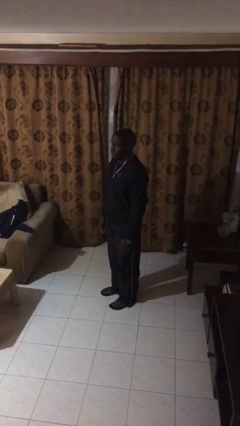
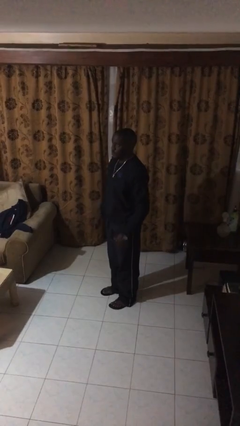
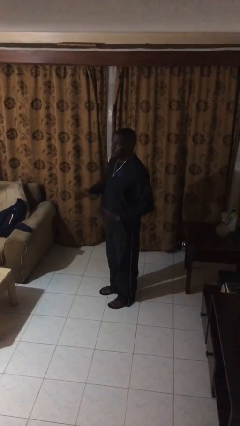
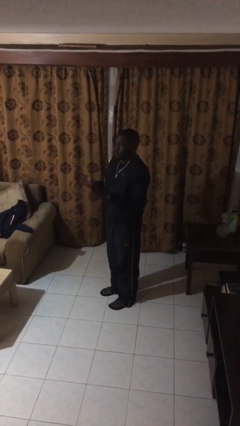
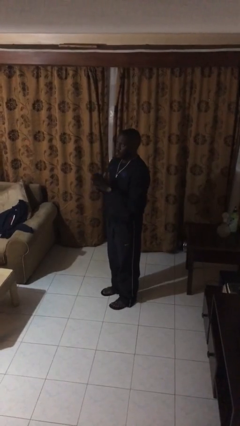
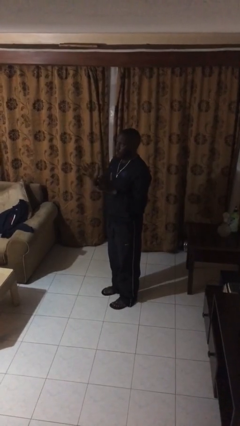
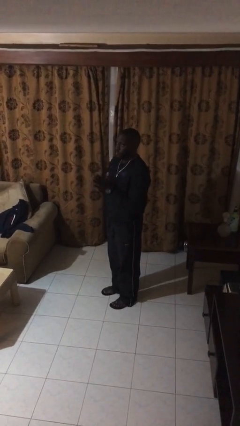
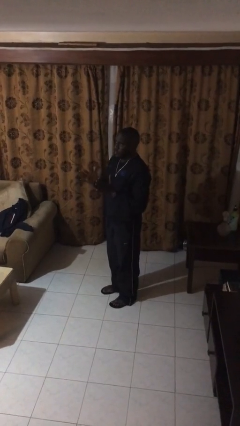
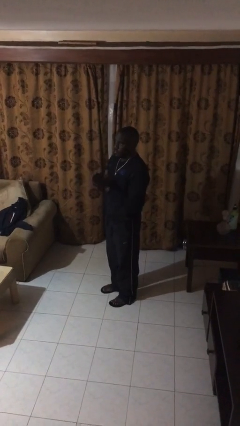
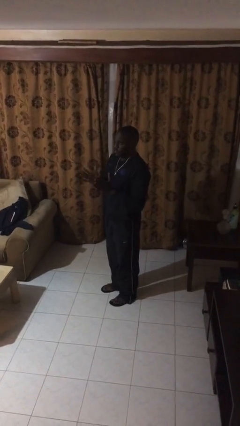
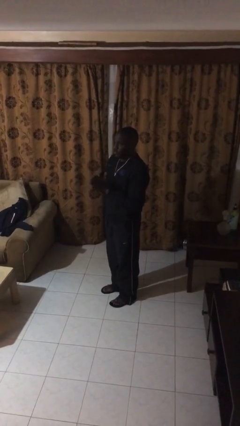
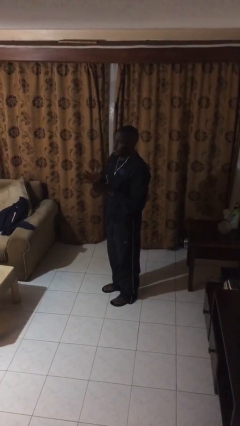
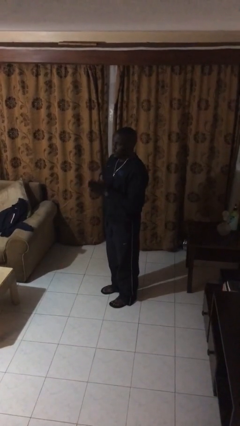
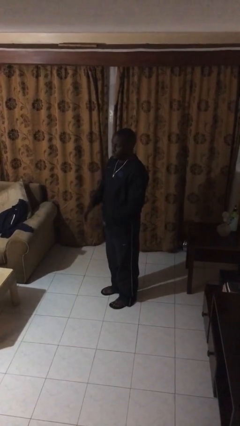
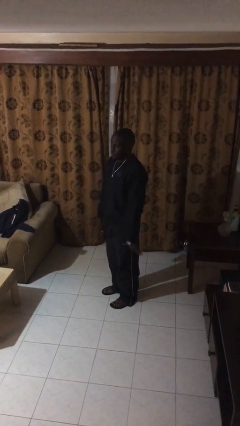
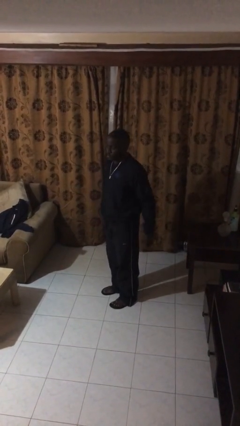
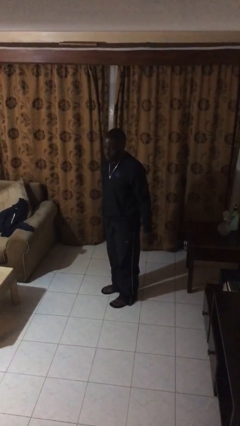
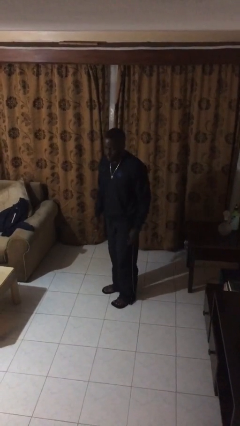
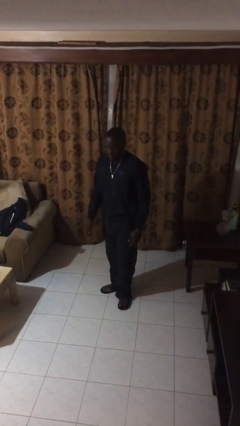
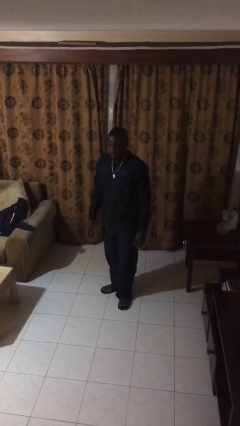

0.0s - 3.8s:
person claps hands

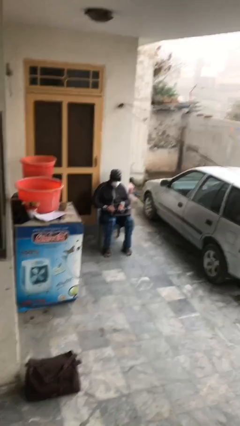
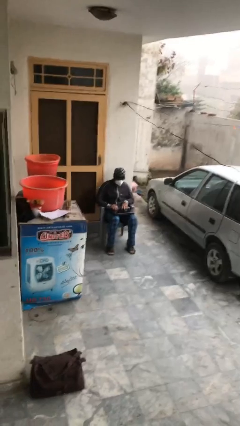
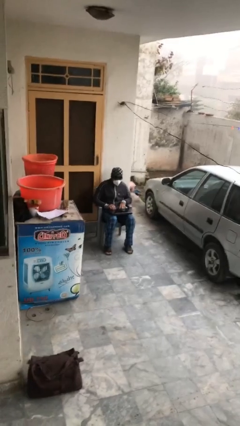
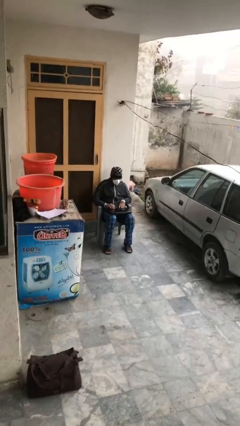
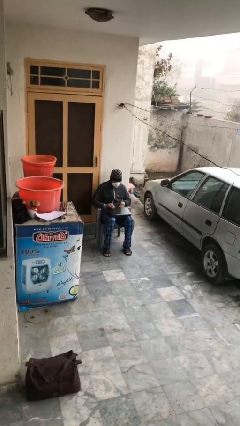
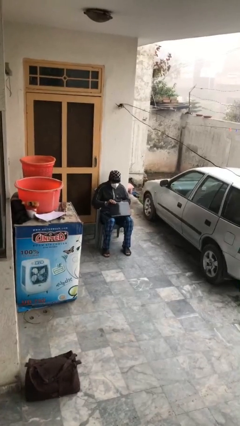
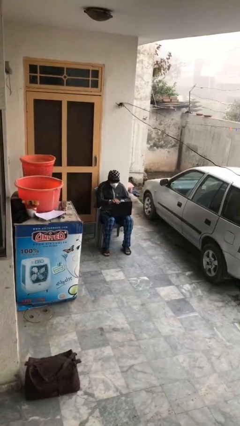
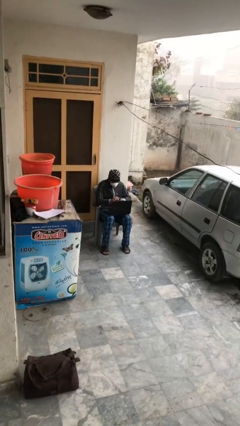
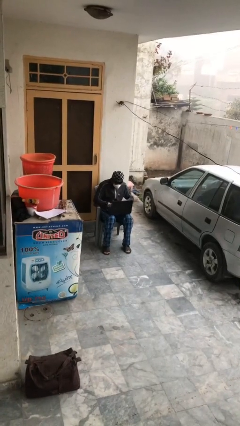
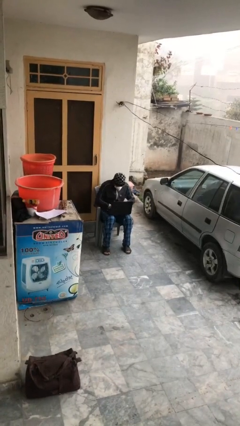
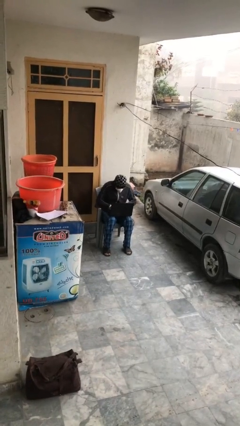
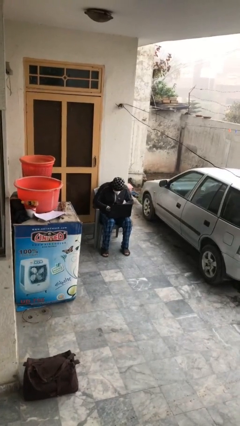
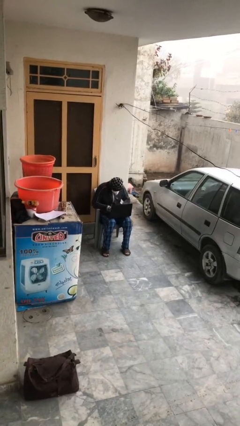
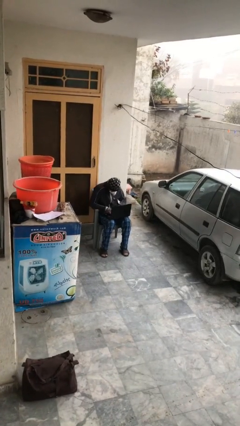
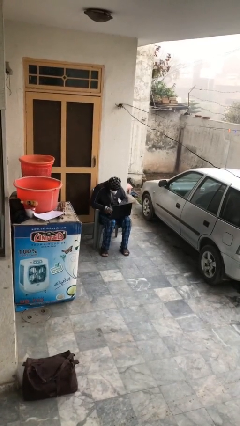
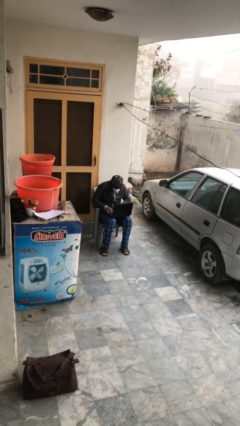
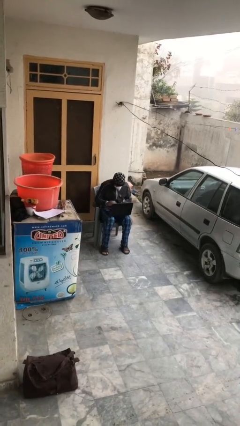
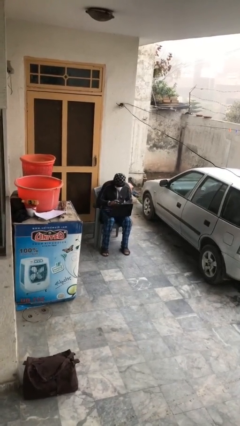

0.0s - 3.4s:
person interacts with laptop

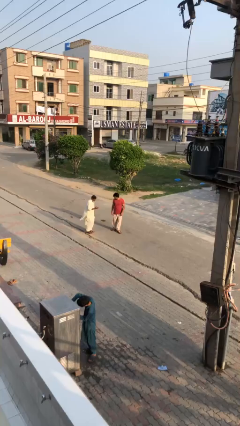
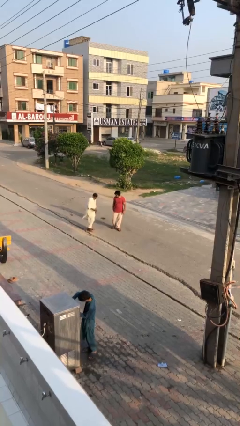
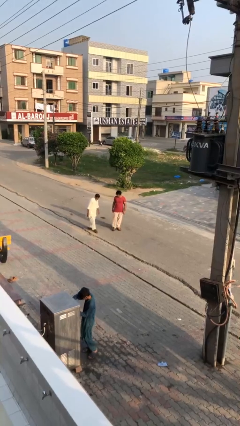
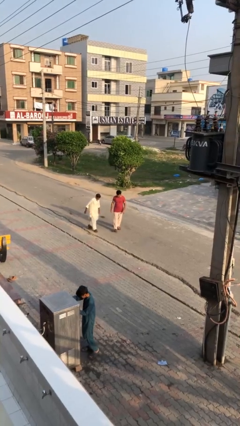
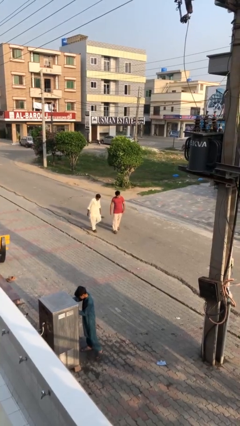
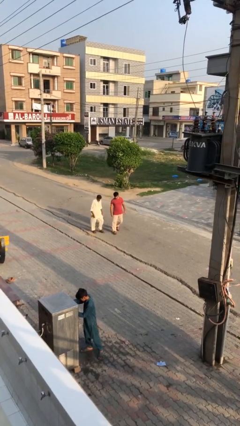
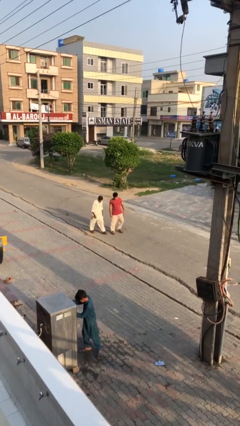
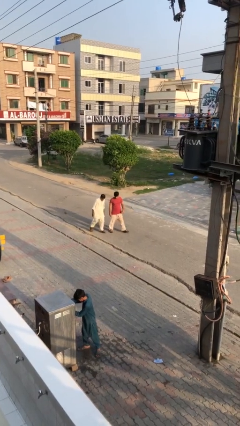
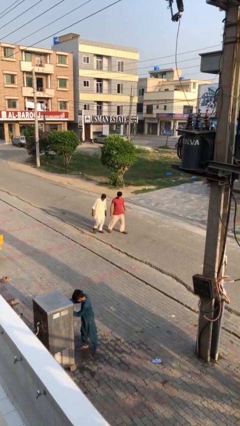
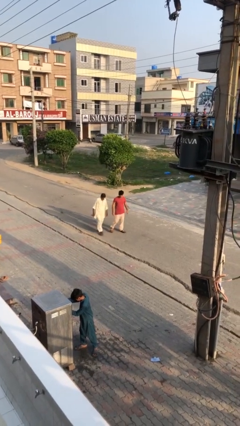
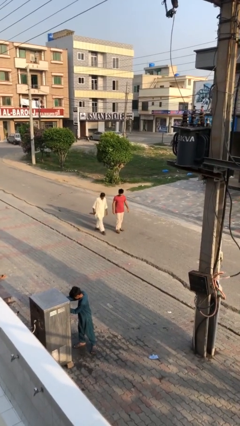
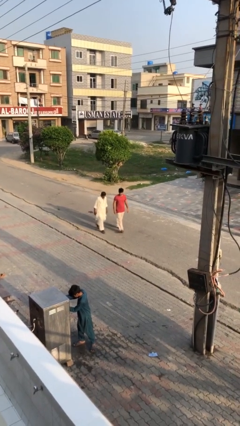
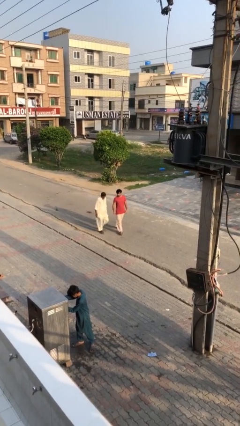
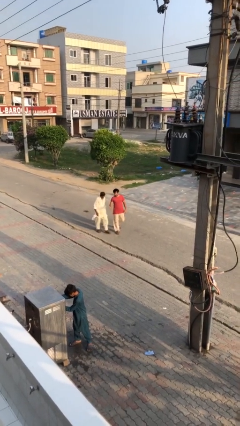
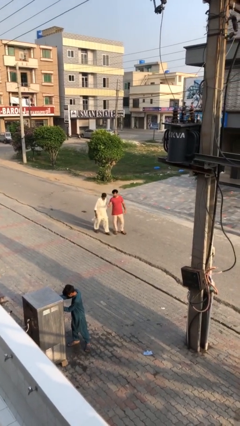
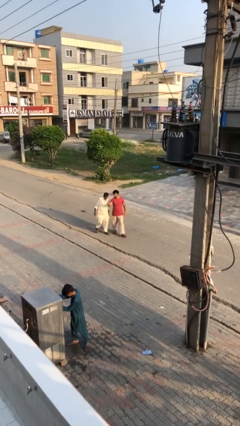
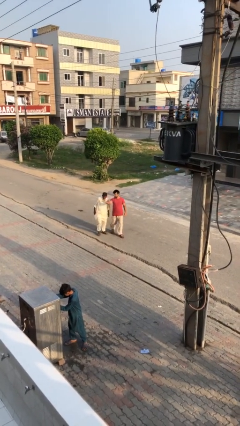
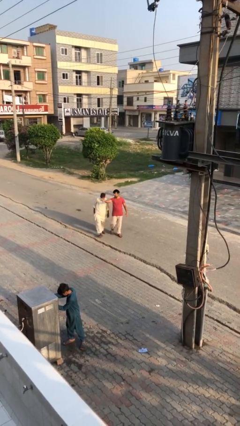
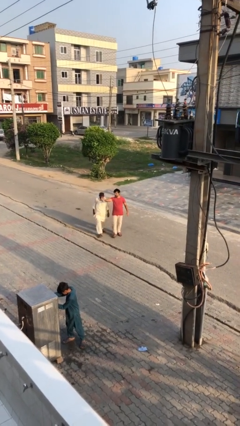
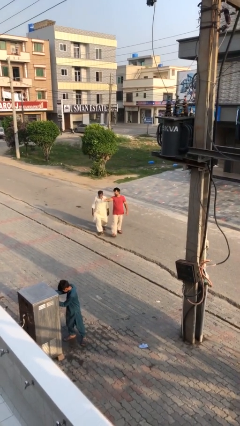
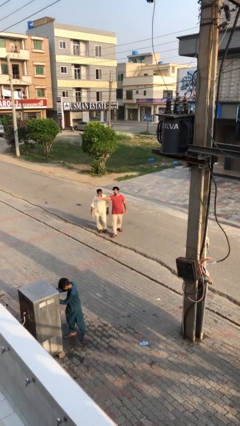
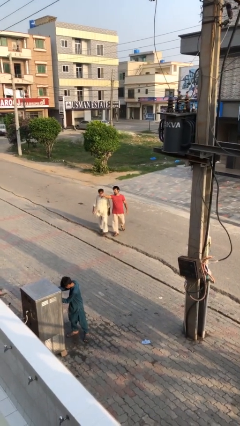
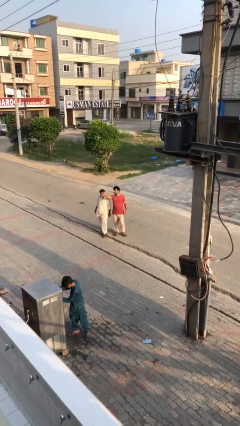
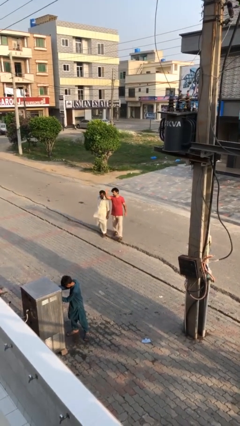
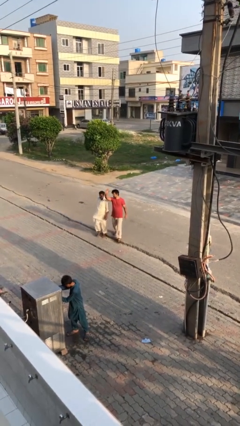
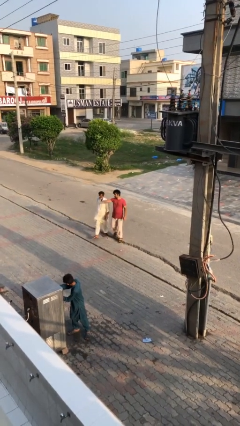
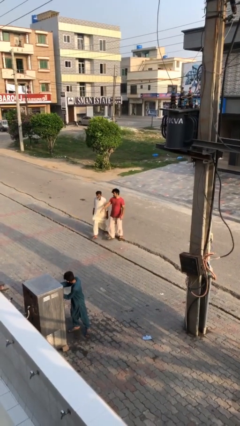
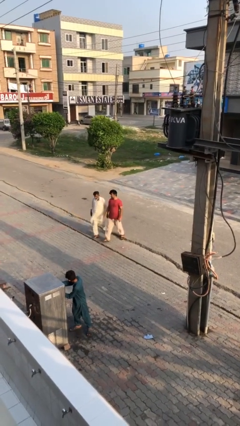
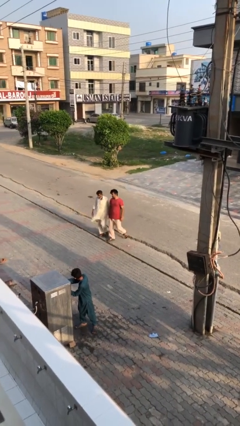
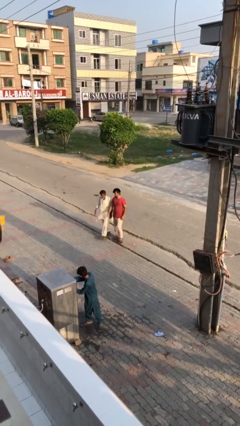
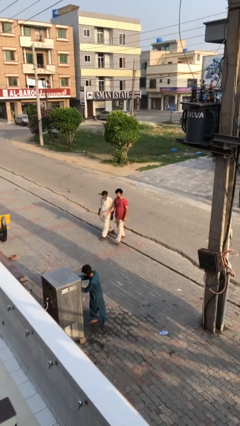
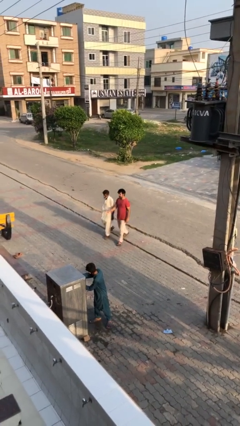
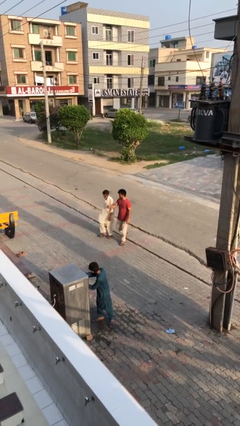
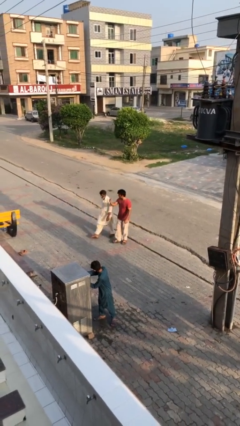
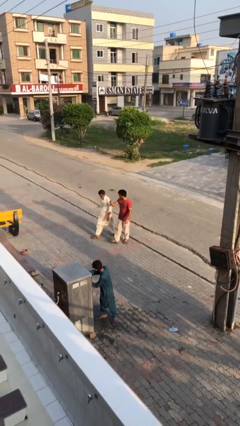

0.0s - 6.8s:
person talks to person

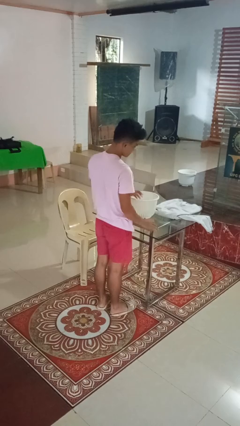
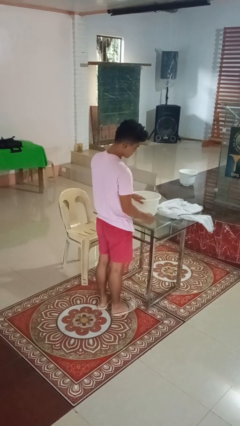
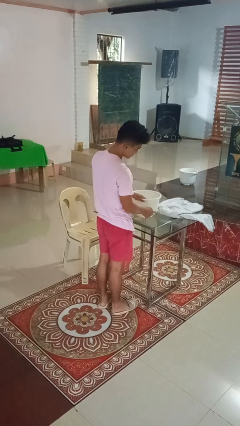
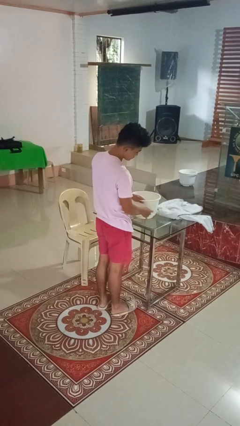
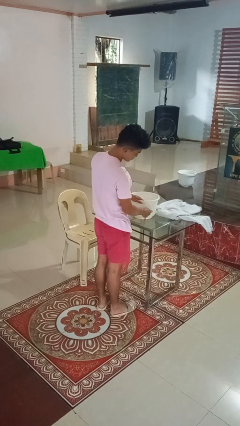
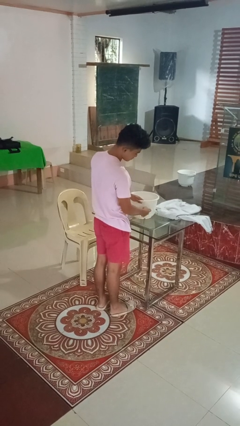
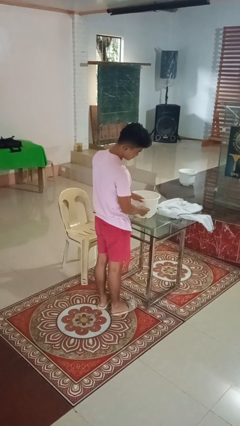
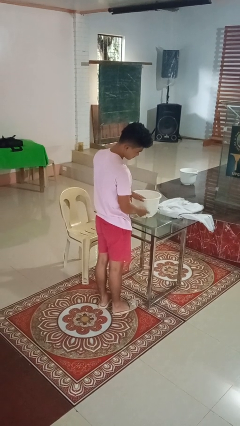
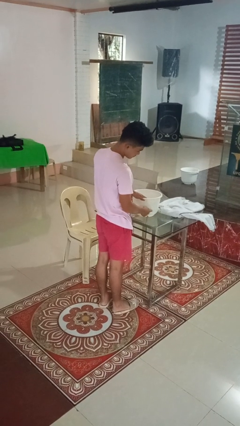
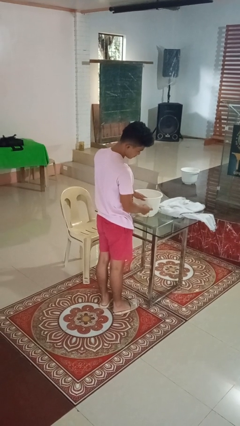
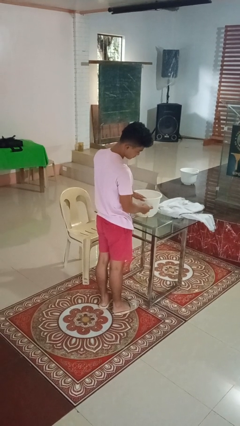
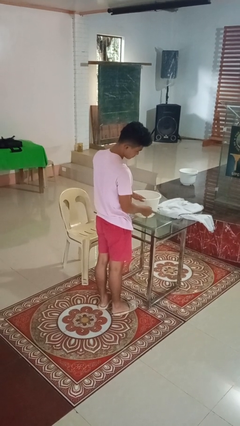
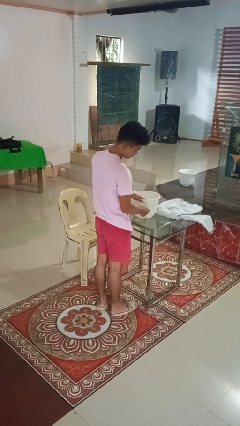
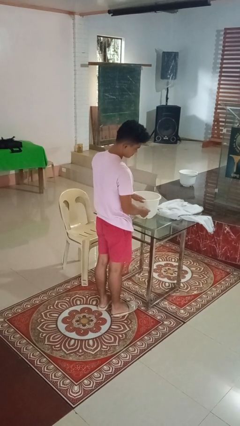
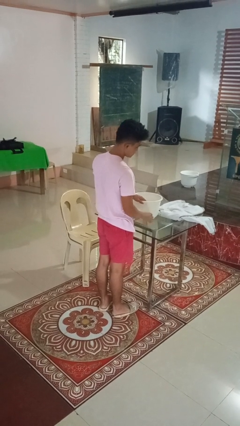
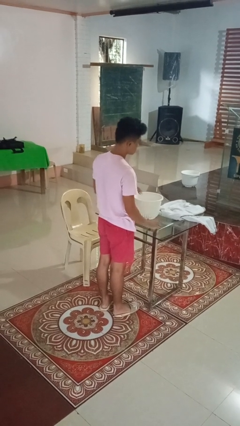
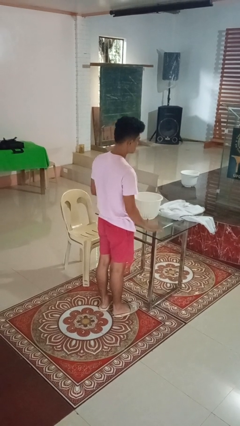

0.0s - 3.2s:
person taps object with finger

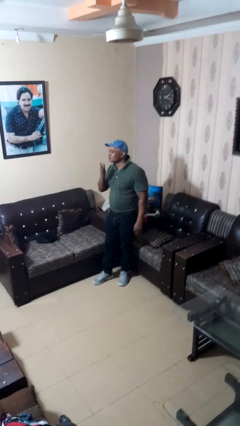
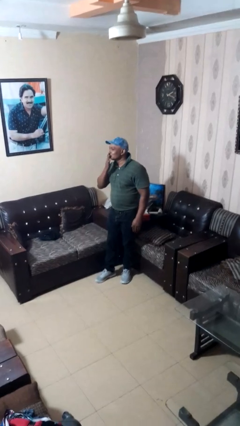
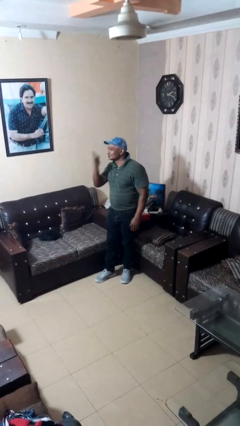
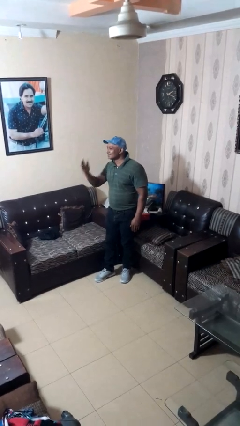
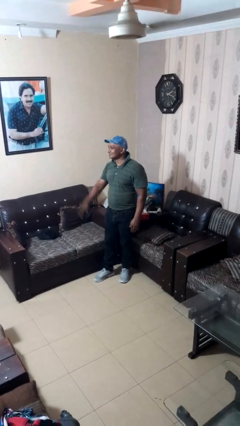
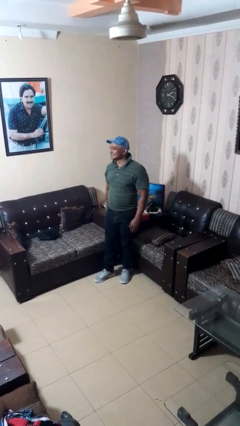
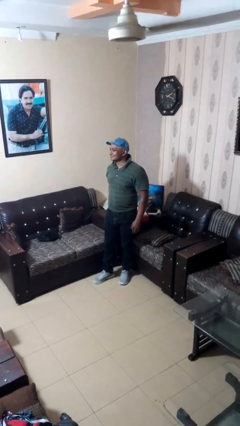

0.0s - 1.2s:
person gestures blow kiss
